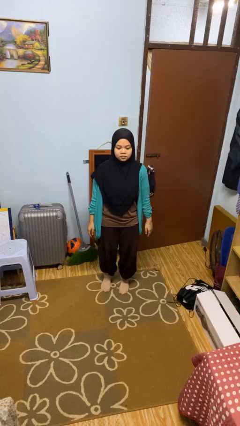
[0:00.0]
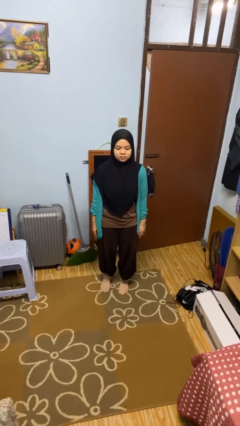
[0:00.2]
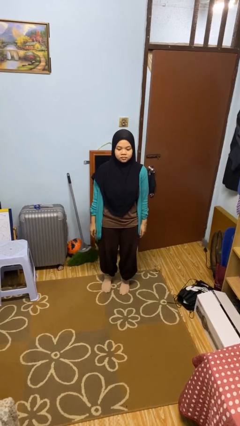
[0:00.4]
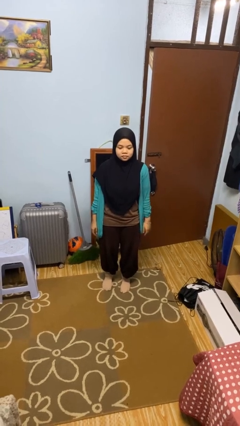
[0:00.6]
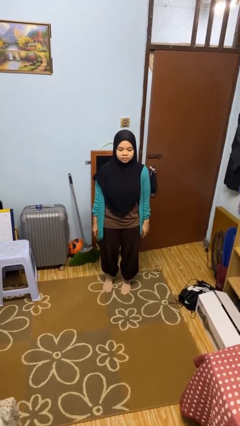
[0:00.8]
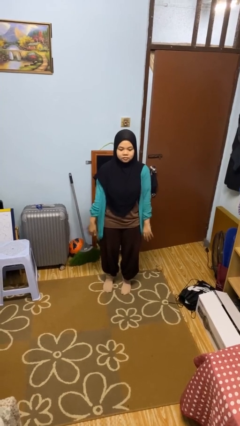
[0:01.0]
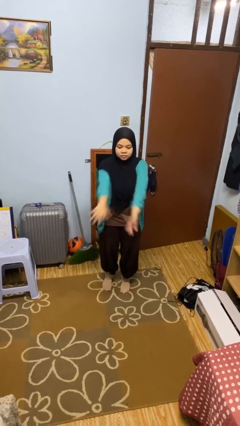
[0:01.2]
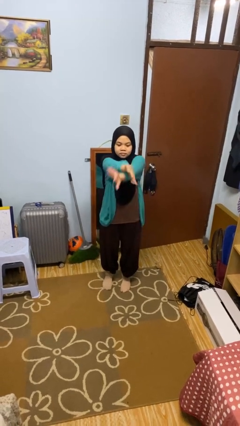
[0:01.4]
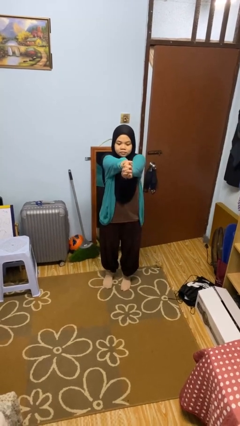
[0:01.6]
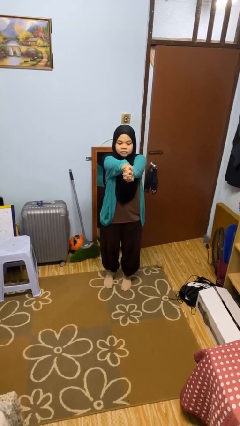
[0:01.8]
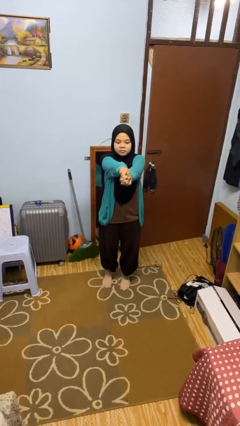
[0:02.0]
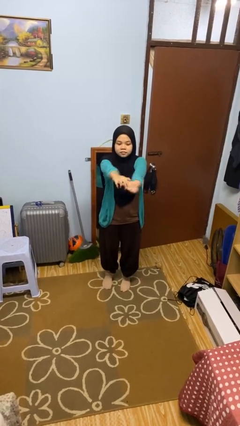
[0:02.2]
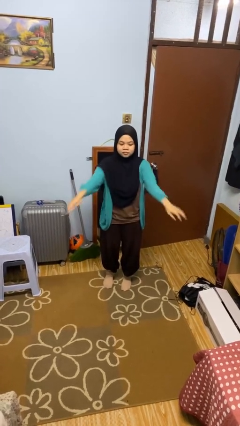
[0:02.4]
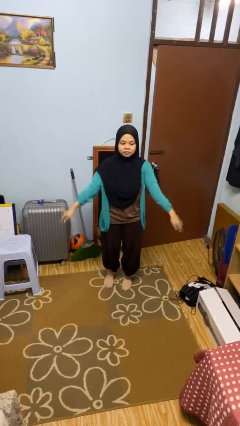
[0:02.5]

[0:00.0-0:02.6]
person crosses arms

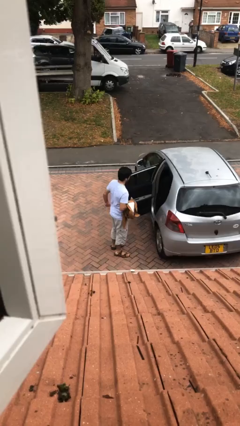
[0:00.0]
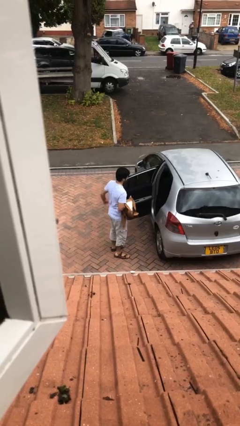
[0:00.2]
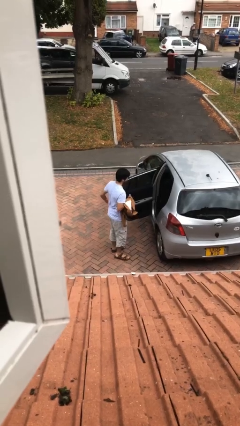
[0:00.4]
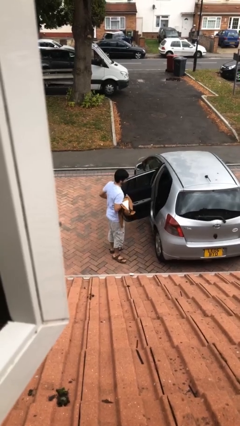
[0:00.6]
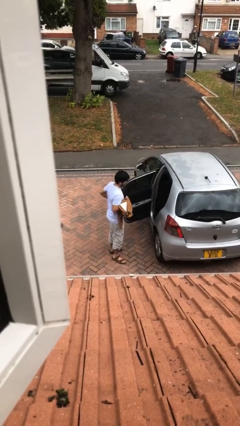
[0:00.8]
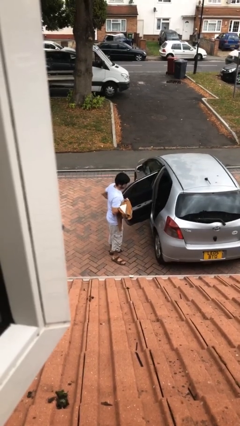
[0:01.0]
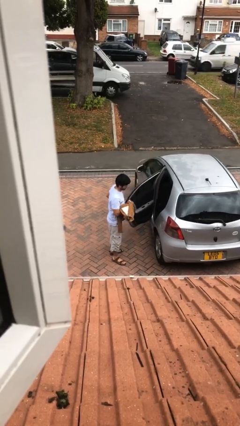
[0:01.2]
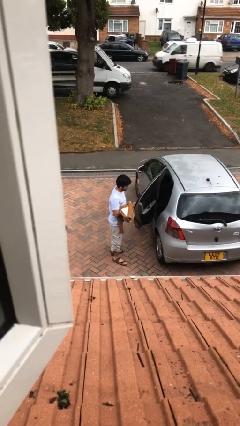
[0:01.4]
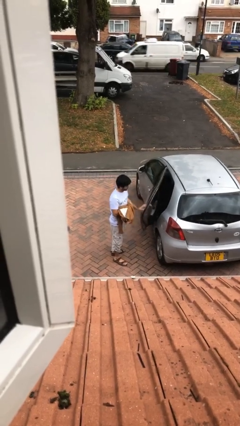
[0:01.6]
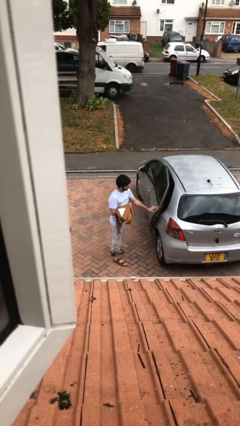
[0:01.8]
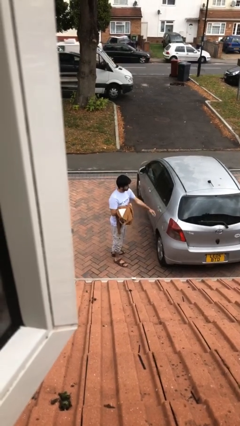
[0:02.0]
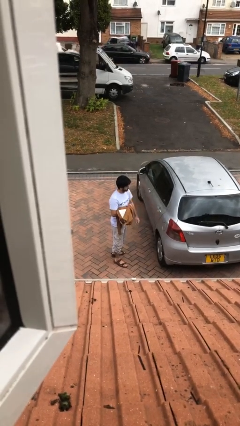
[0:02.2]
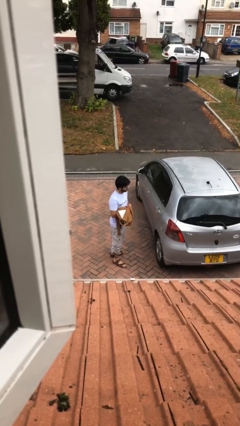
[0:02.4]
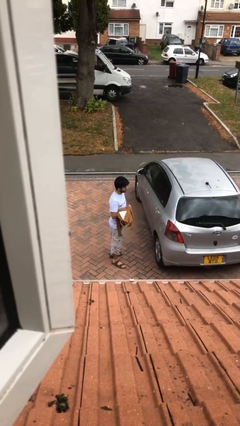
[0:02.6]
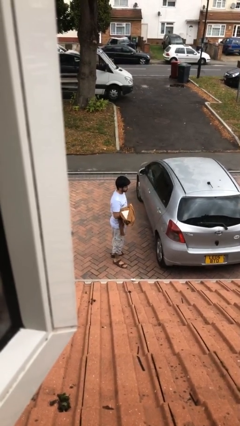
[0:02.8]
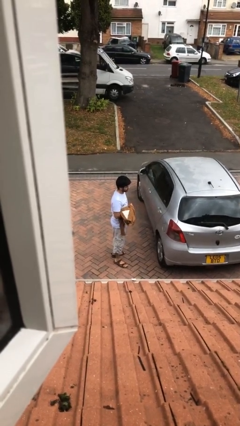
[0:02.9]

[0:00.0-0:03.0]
person closes car door

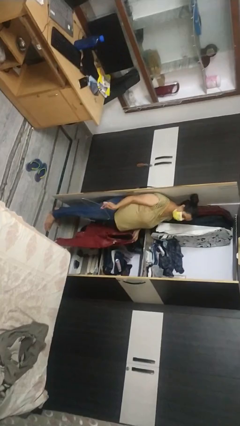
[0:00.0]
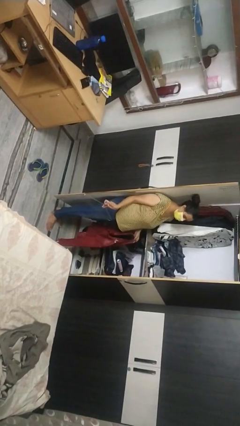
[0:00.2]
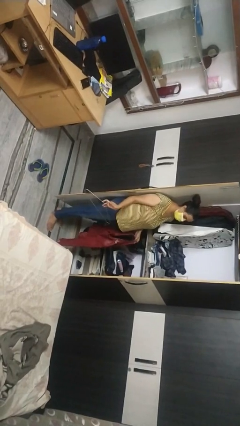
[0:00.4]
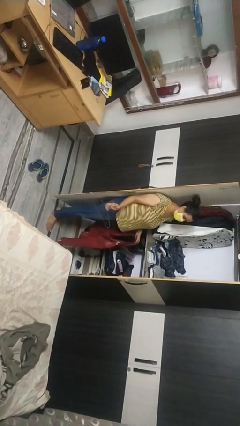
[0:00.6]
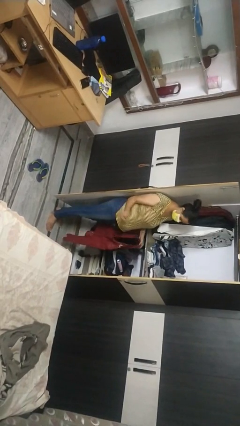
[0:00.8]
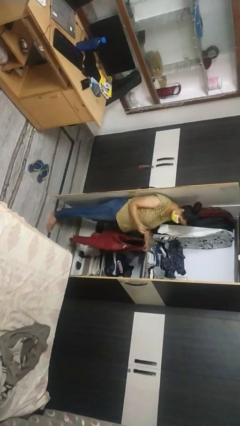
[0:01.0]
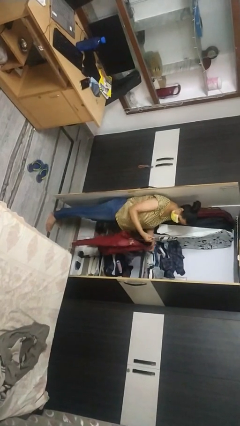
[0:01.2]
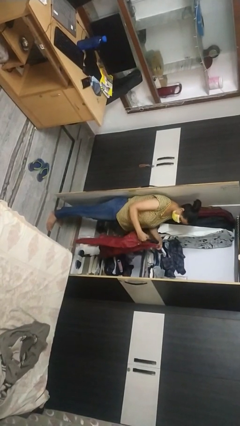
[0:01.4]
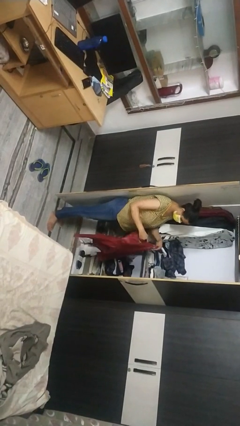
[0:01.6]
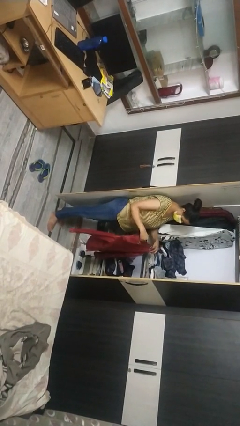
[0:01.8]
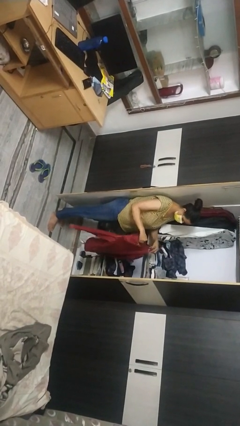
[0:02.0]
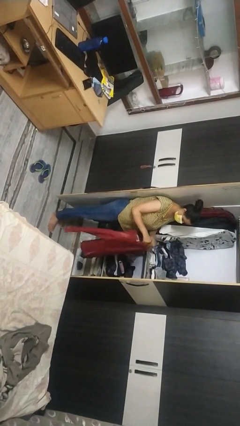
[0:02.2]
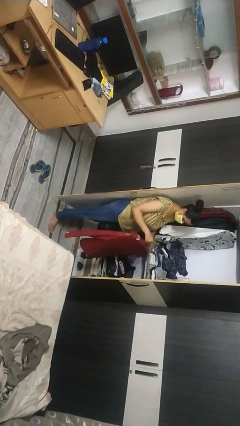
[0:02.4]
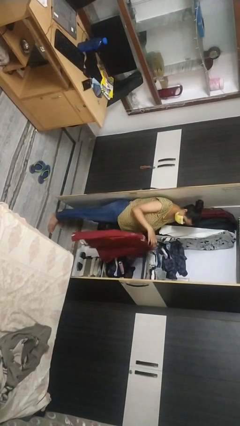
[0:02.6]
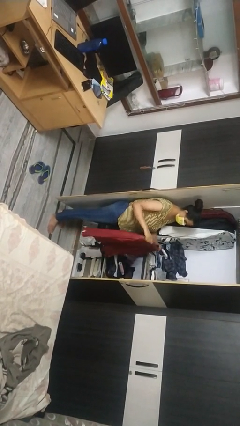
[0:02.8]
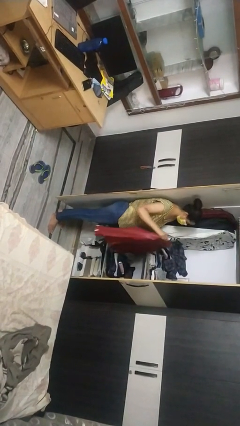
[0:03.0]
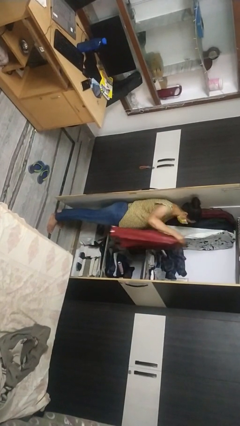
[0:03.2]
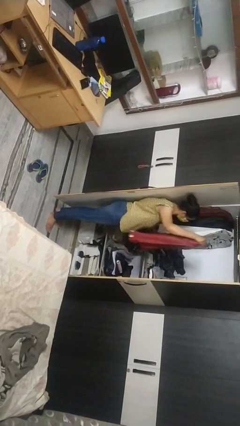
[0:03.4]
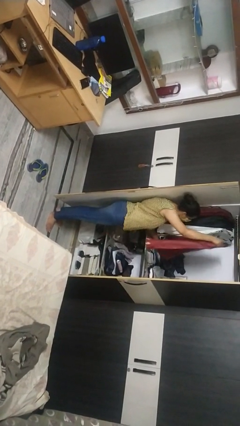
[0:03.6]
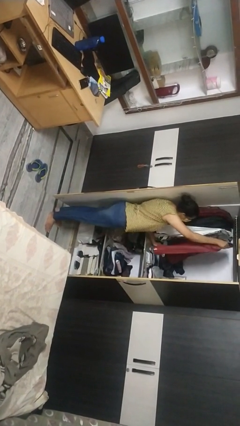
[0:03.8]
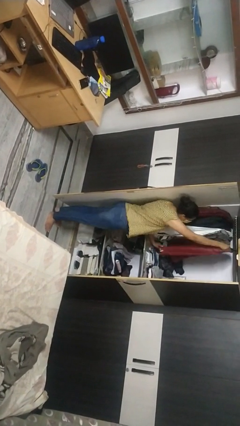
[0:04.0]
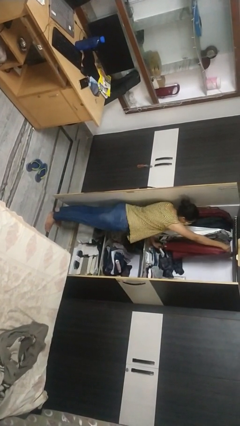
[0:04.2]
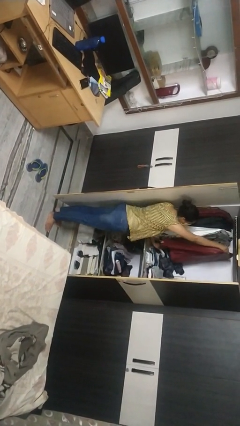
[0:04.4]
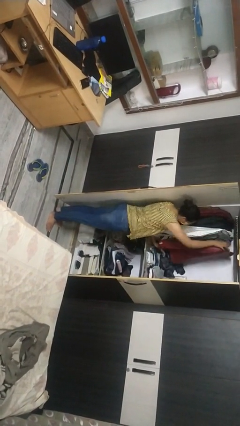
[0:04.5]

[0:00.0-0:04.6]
person puts clothes into closet

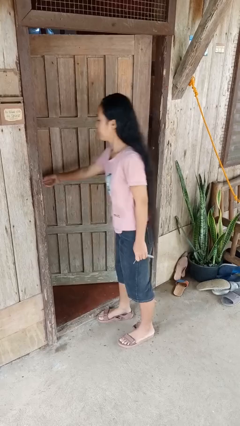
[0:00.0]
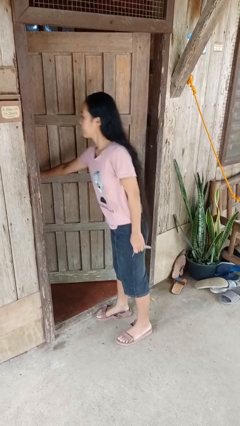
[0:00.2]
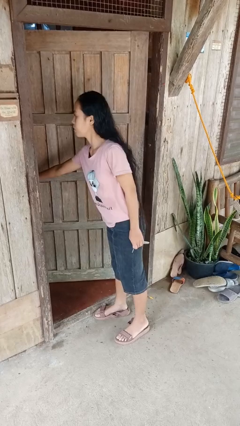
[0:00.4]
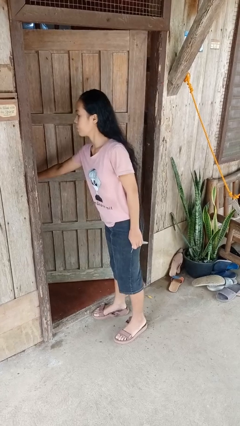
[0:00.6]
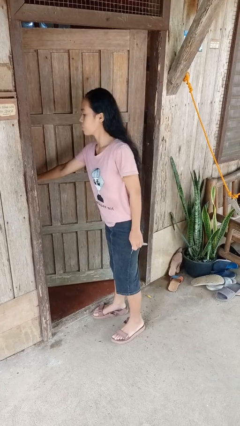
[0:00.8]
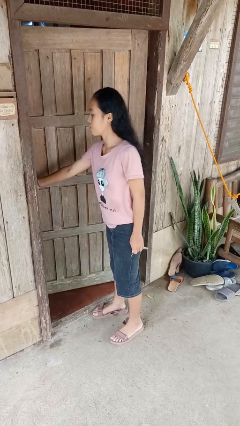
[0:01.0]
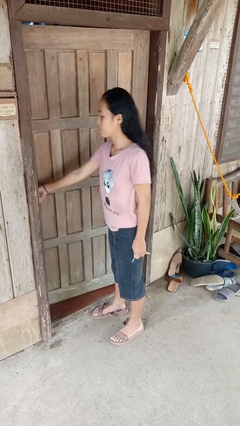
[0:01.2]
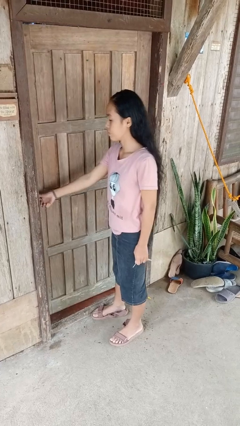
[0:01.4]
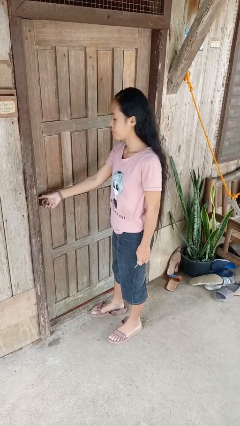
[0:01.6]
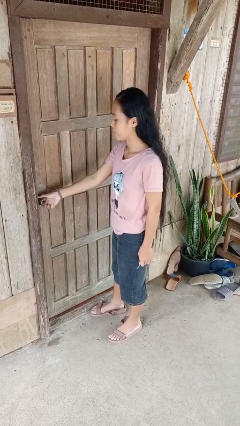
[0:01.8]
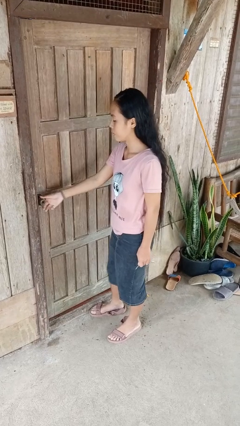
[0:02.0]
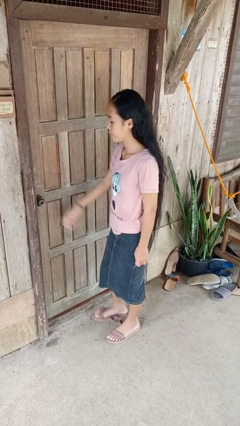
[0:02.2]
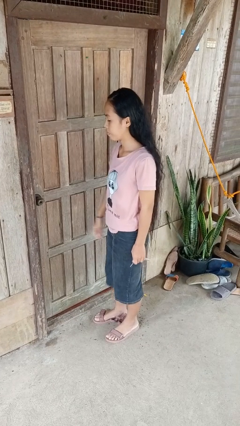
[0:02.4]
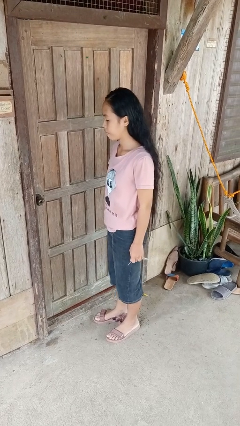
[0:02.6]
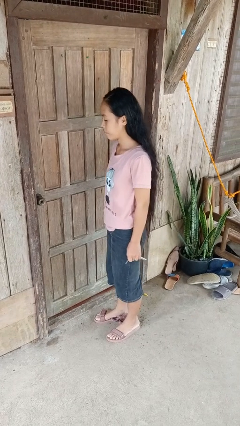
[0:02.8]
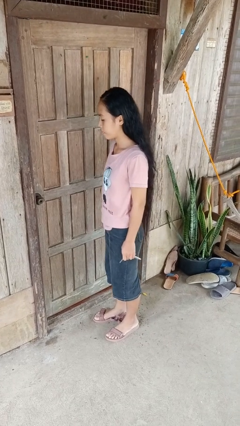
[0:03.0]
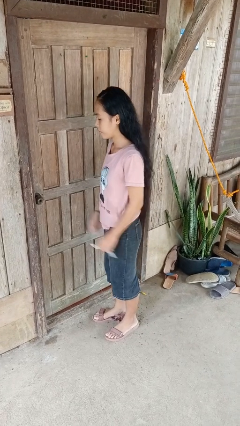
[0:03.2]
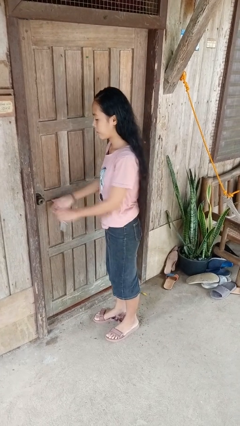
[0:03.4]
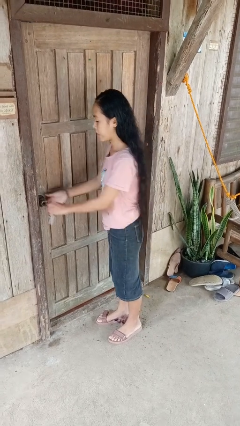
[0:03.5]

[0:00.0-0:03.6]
person closes facility door

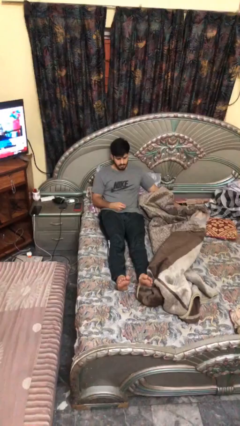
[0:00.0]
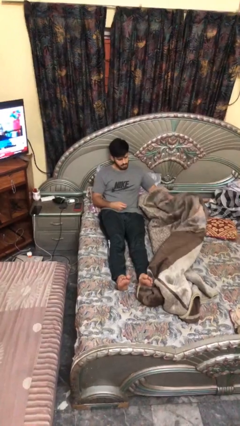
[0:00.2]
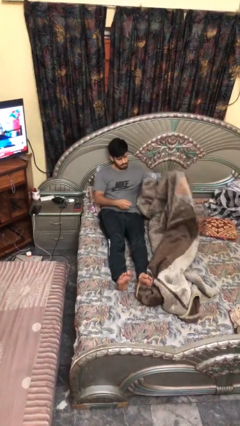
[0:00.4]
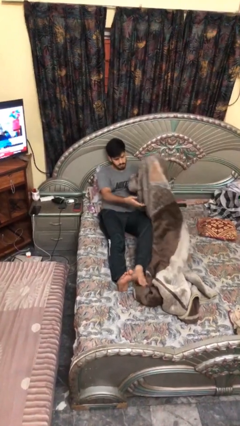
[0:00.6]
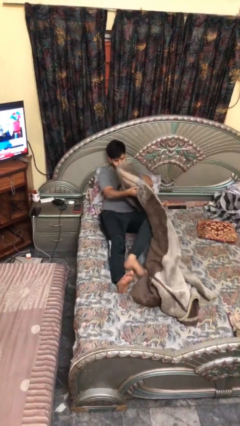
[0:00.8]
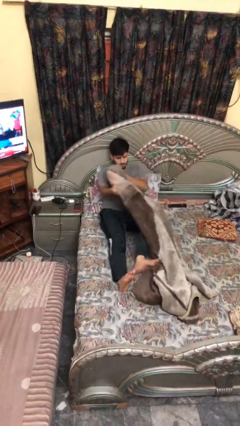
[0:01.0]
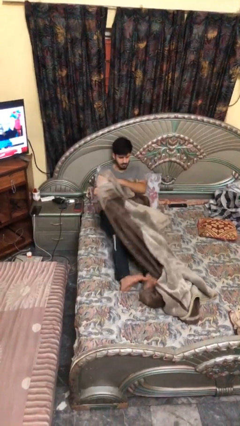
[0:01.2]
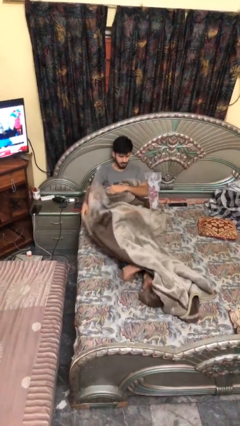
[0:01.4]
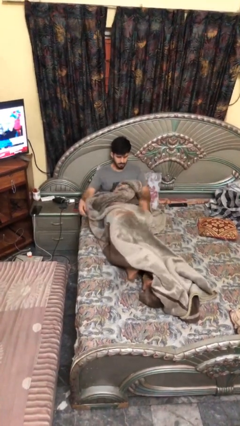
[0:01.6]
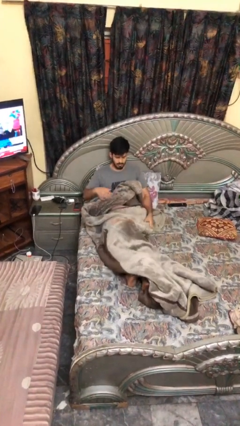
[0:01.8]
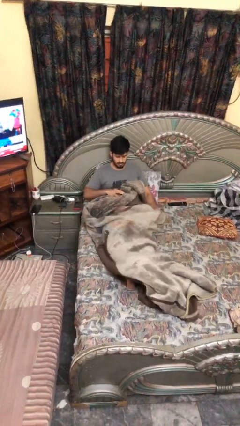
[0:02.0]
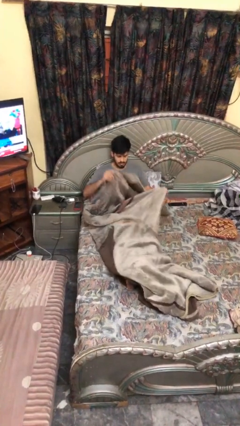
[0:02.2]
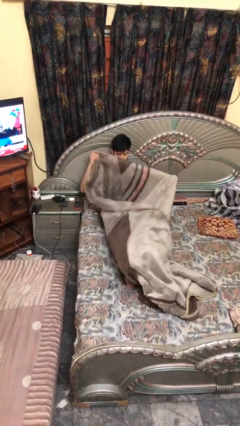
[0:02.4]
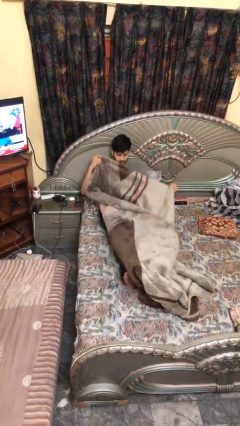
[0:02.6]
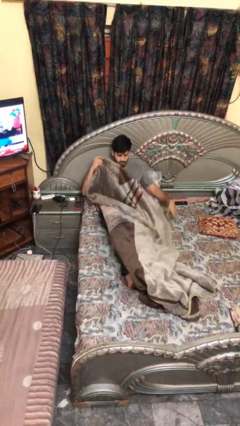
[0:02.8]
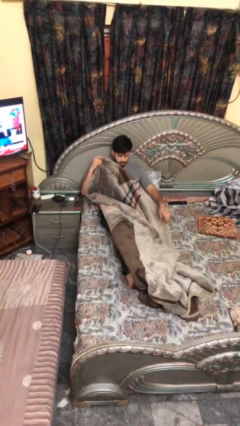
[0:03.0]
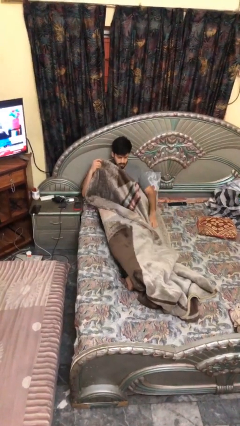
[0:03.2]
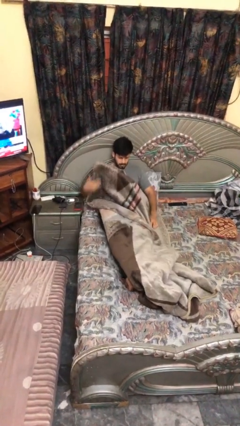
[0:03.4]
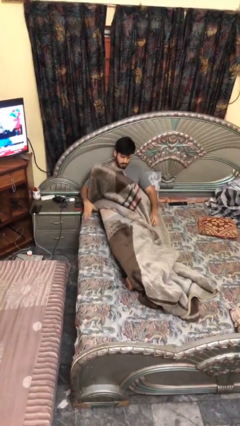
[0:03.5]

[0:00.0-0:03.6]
person covers with blanket

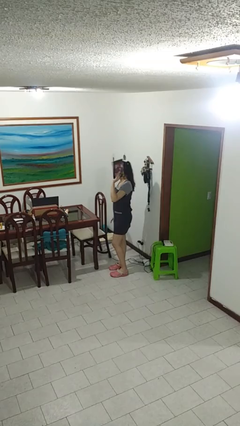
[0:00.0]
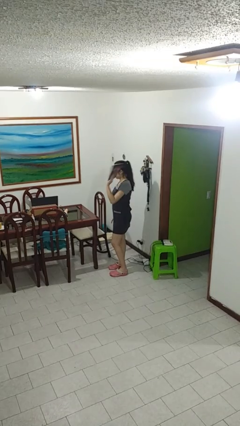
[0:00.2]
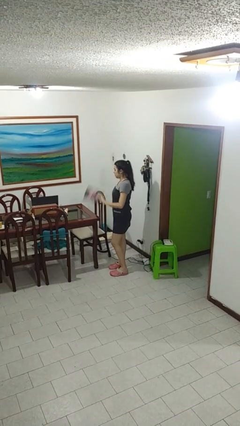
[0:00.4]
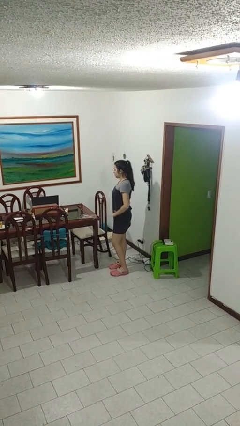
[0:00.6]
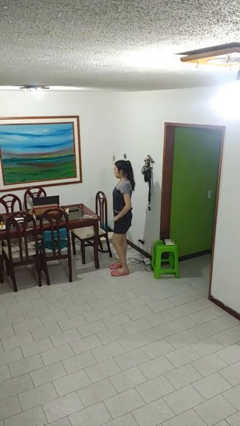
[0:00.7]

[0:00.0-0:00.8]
person throws object on table
